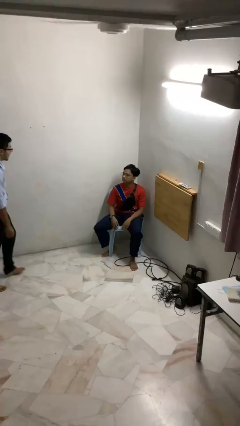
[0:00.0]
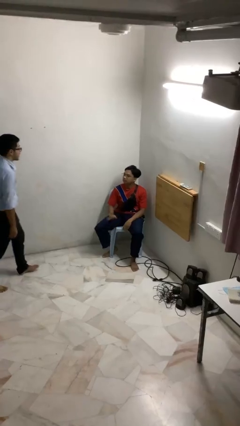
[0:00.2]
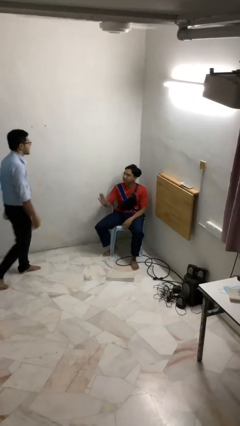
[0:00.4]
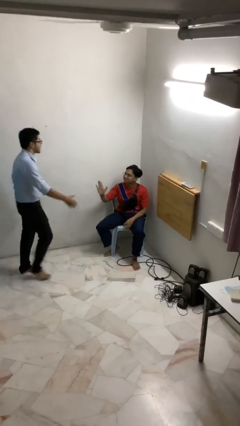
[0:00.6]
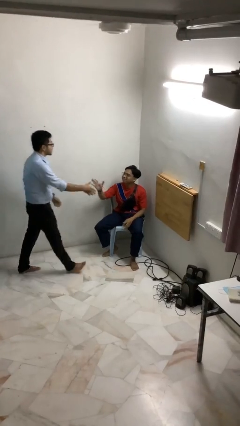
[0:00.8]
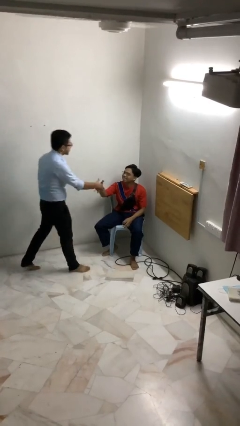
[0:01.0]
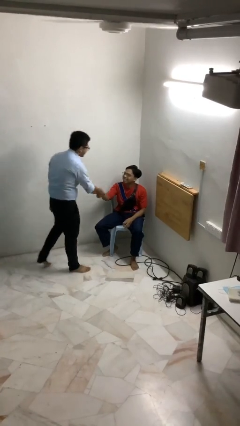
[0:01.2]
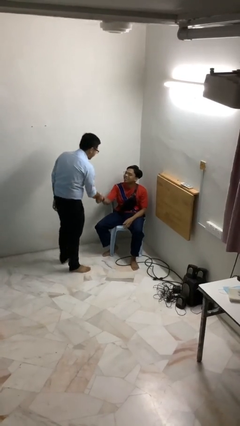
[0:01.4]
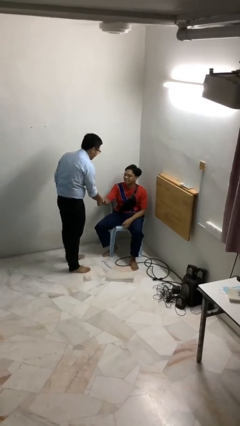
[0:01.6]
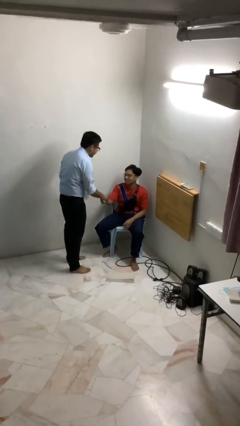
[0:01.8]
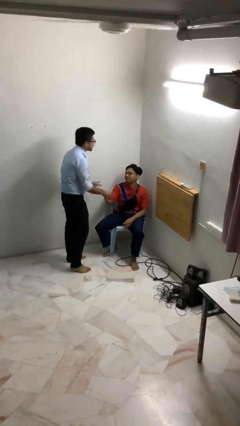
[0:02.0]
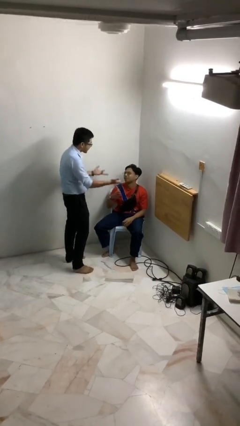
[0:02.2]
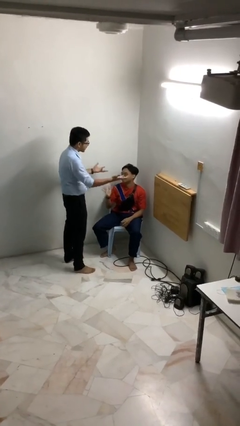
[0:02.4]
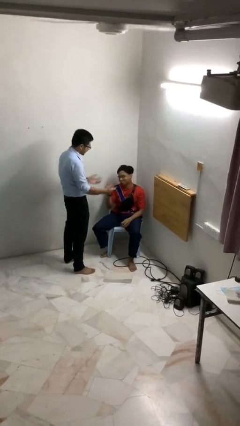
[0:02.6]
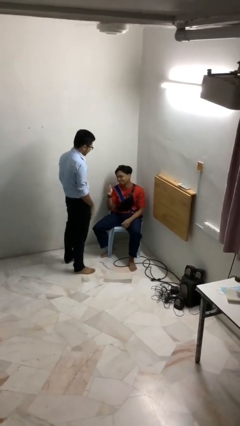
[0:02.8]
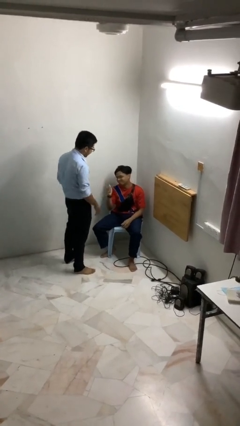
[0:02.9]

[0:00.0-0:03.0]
person shakes hand

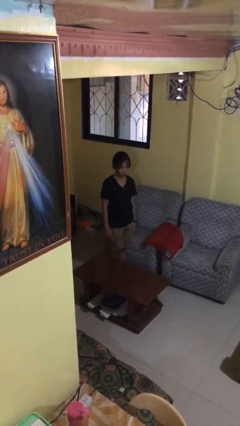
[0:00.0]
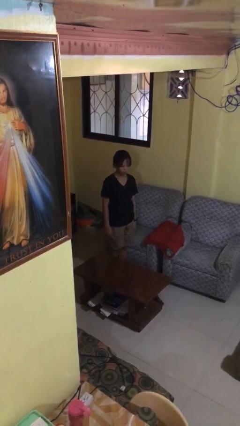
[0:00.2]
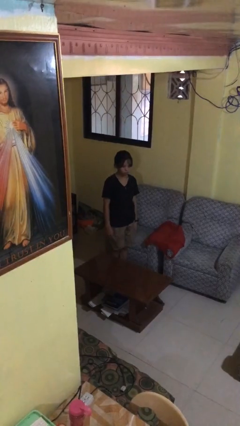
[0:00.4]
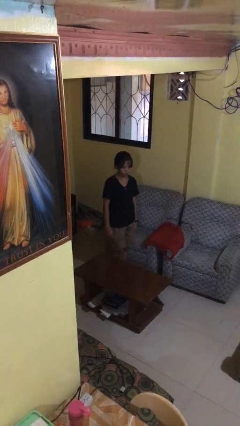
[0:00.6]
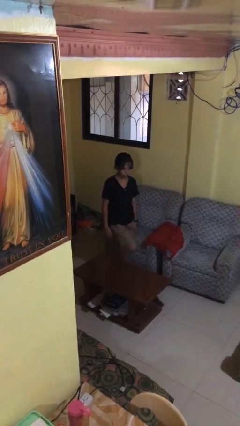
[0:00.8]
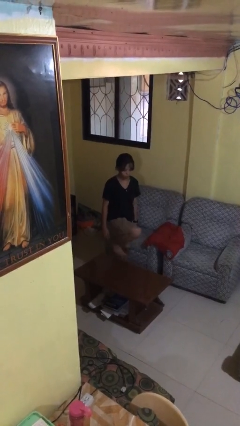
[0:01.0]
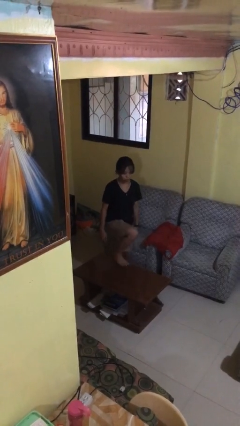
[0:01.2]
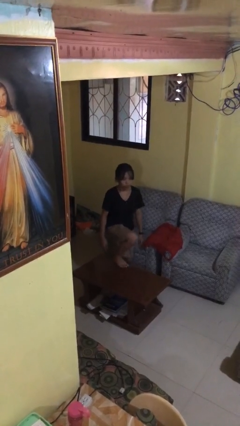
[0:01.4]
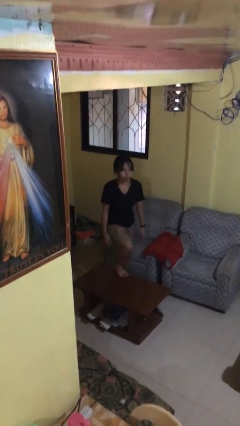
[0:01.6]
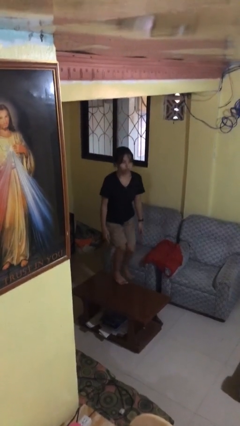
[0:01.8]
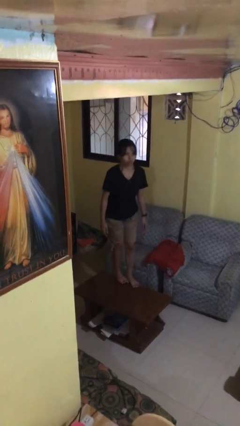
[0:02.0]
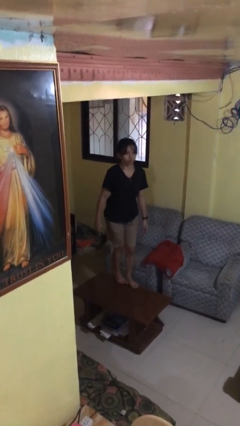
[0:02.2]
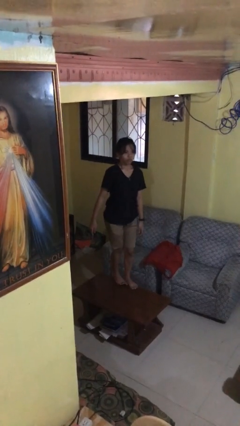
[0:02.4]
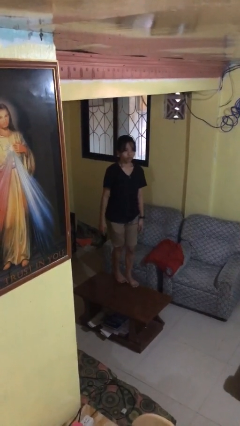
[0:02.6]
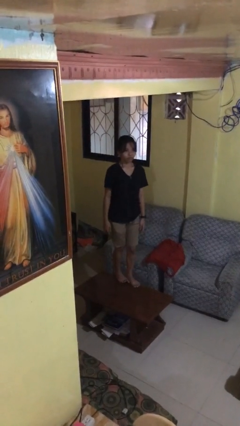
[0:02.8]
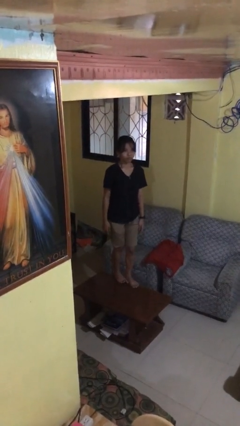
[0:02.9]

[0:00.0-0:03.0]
person climbs on table

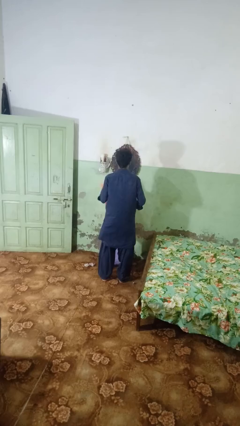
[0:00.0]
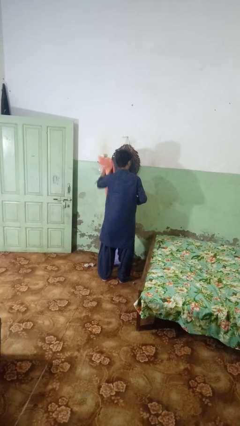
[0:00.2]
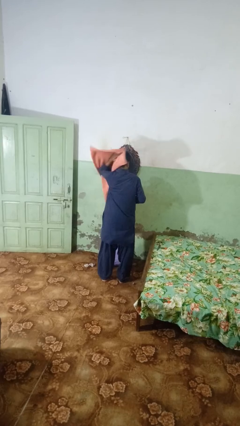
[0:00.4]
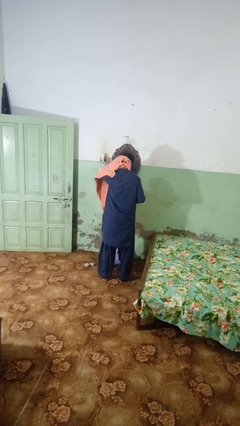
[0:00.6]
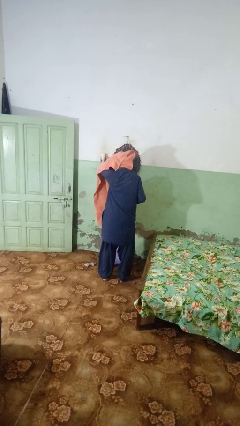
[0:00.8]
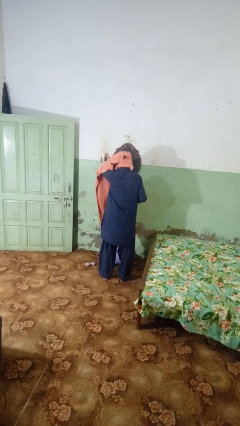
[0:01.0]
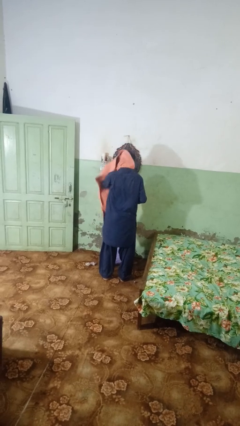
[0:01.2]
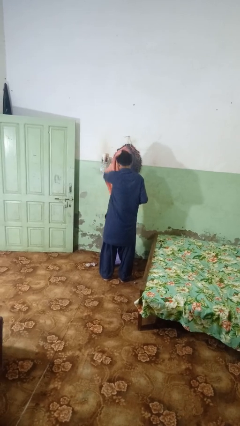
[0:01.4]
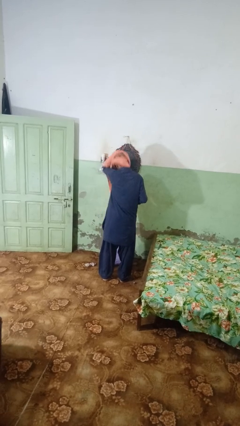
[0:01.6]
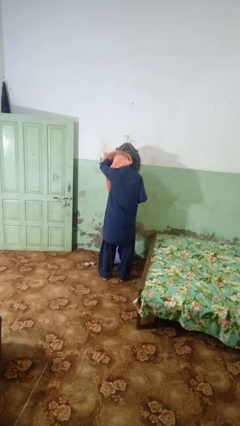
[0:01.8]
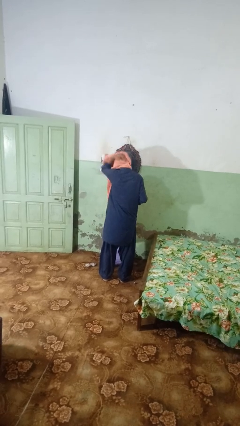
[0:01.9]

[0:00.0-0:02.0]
person dries hair with towel

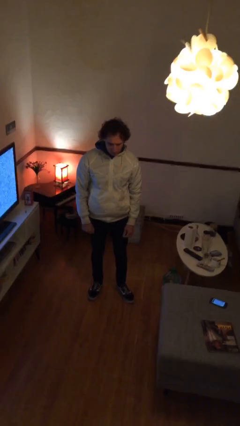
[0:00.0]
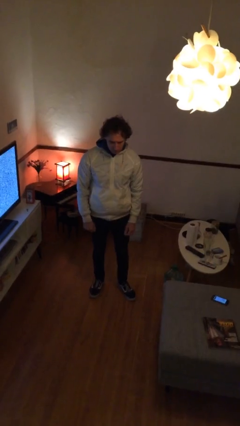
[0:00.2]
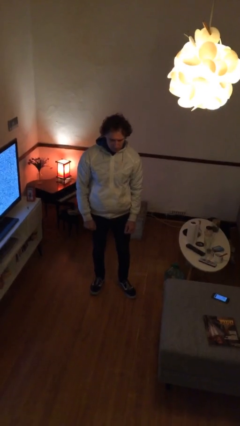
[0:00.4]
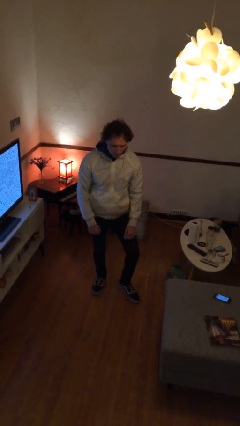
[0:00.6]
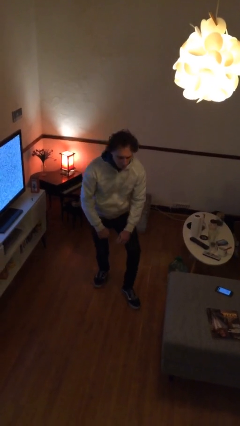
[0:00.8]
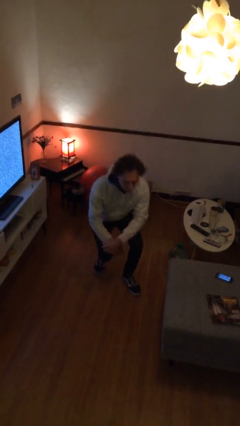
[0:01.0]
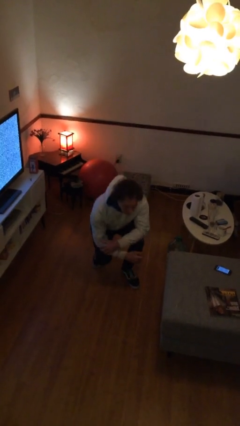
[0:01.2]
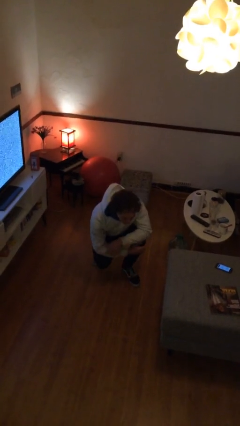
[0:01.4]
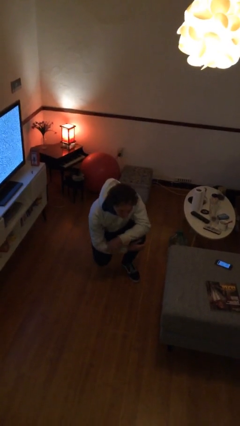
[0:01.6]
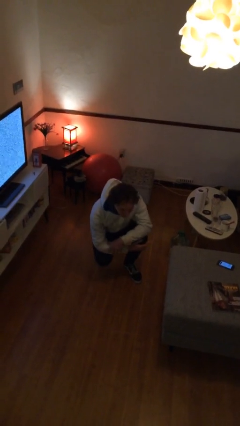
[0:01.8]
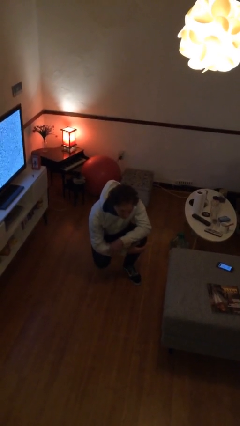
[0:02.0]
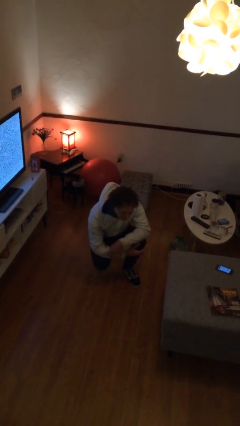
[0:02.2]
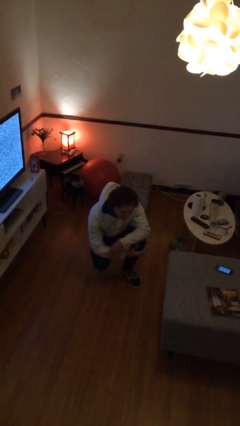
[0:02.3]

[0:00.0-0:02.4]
person squats

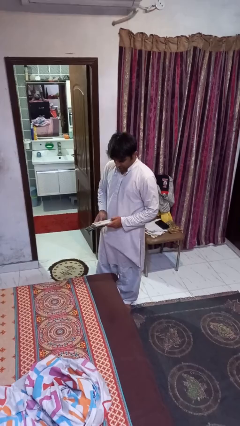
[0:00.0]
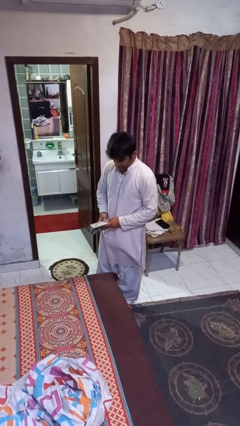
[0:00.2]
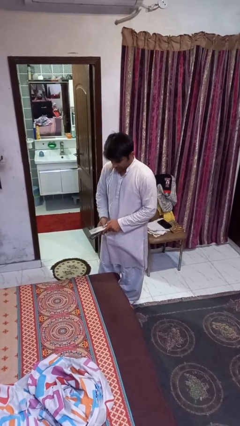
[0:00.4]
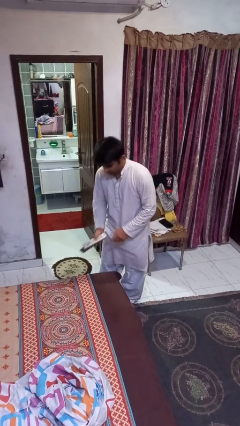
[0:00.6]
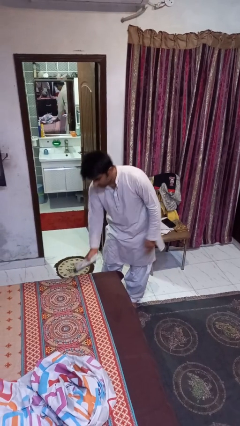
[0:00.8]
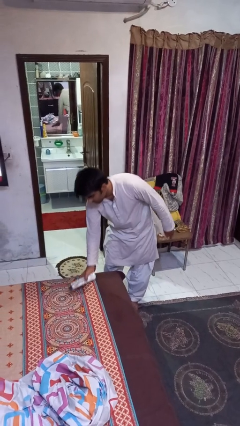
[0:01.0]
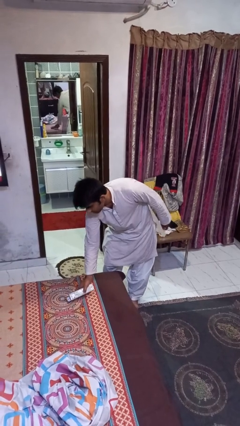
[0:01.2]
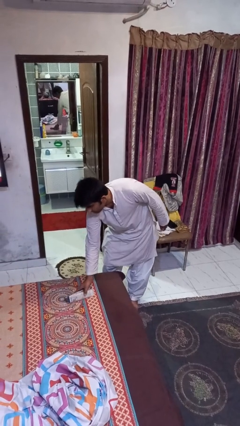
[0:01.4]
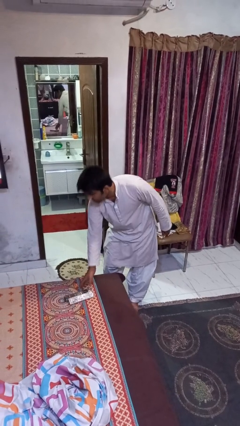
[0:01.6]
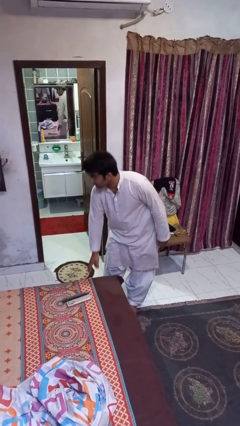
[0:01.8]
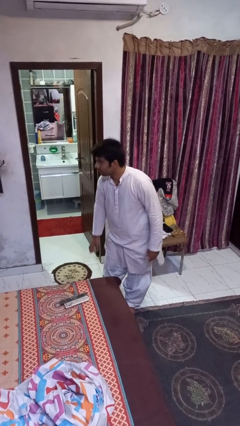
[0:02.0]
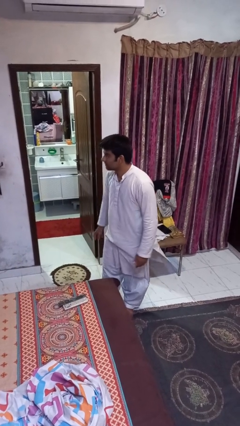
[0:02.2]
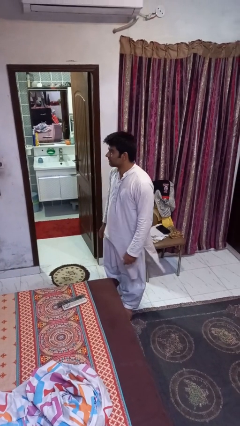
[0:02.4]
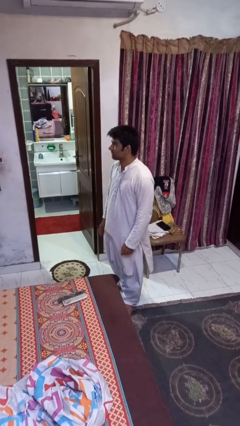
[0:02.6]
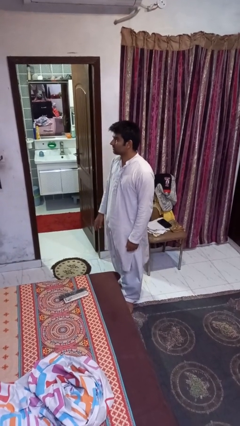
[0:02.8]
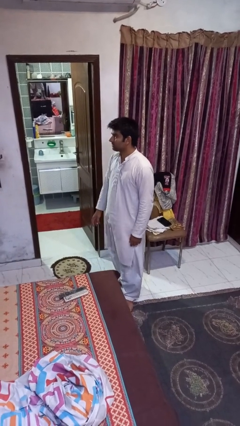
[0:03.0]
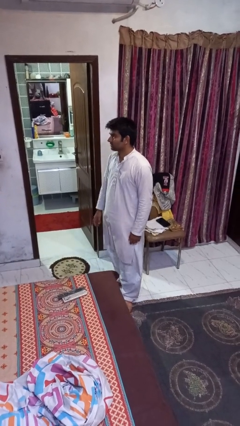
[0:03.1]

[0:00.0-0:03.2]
person puts down object on bed

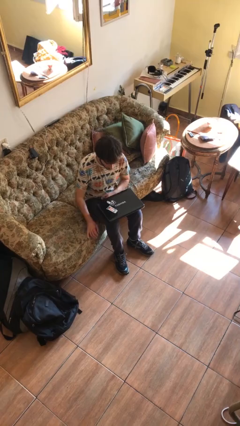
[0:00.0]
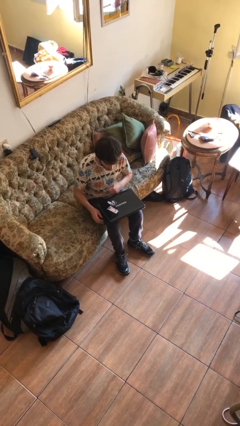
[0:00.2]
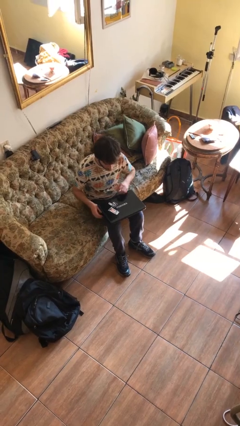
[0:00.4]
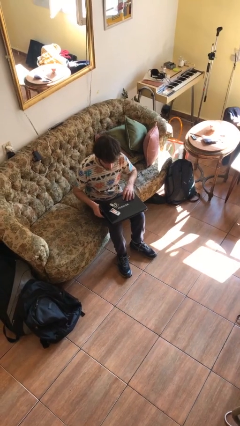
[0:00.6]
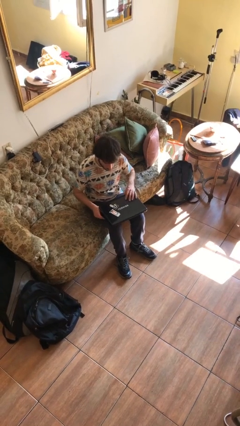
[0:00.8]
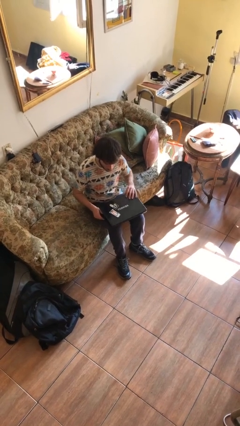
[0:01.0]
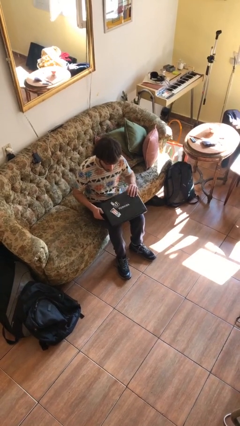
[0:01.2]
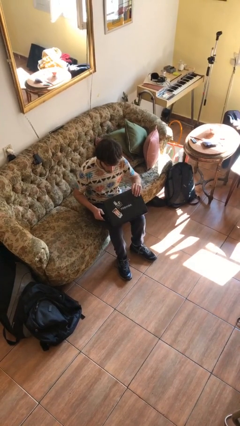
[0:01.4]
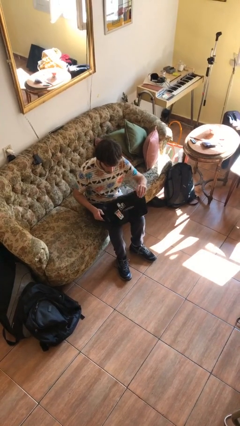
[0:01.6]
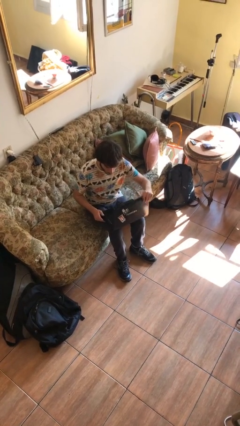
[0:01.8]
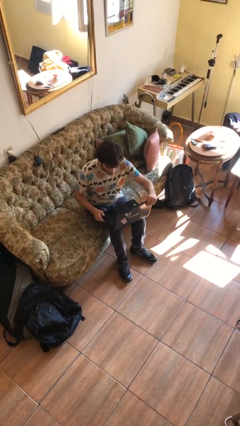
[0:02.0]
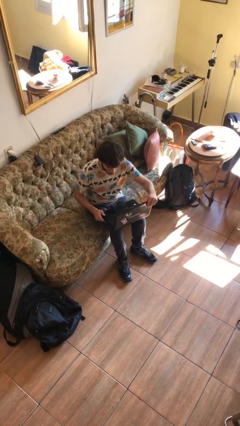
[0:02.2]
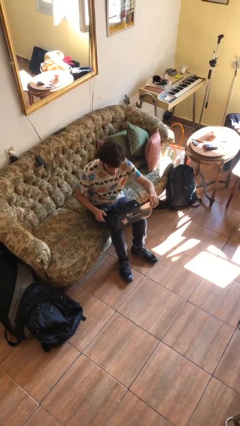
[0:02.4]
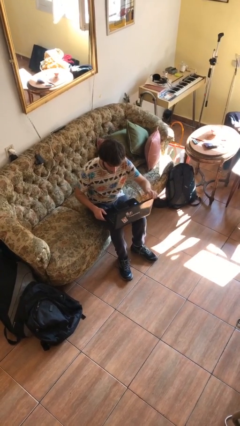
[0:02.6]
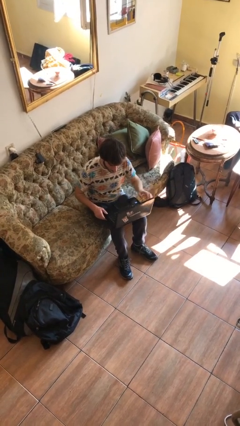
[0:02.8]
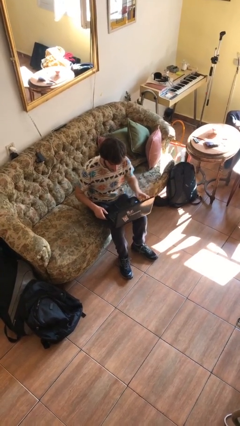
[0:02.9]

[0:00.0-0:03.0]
person opens laptop

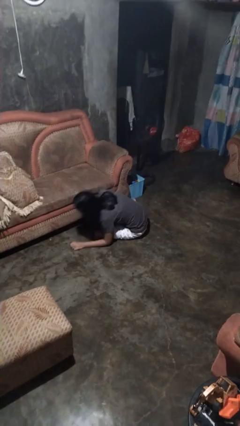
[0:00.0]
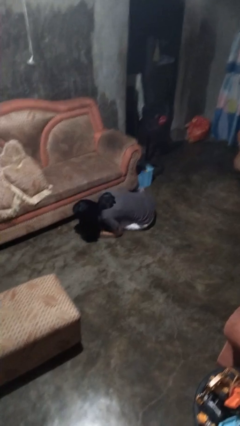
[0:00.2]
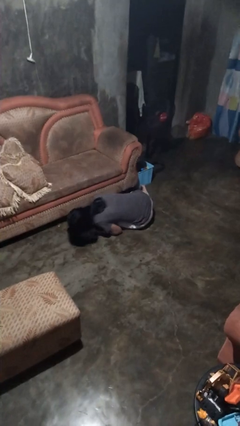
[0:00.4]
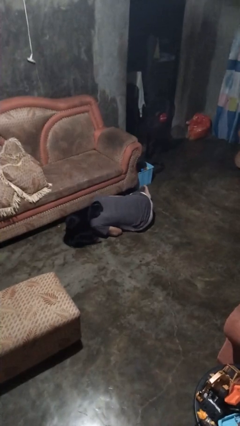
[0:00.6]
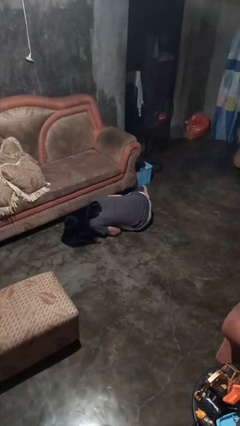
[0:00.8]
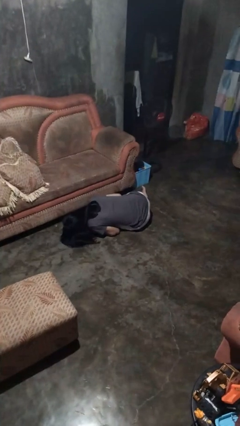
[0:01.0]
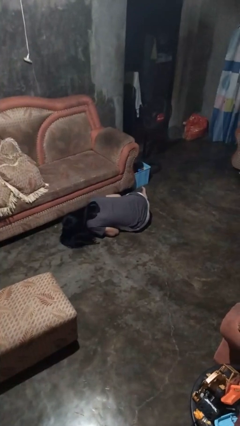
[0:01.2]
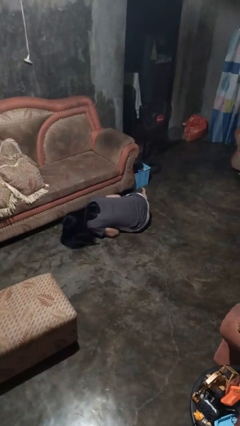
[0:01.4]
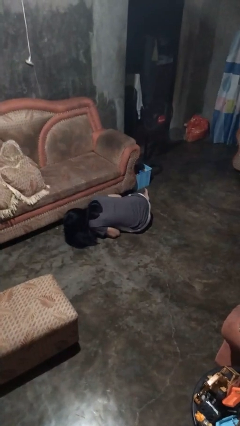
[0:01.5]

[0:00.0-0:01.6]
person searches under couch
